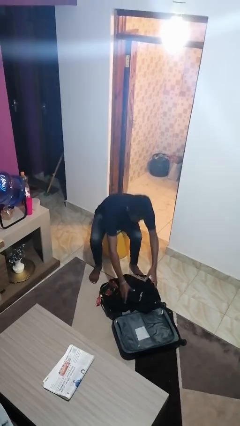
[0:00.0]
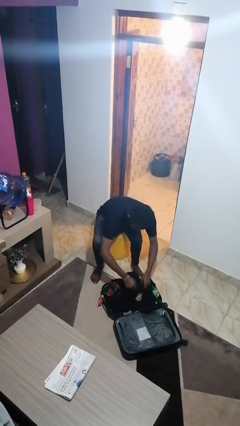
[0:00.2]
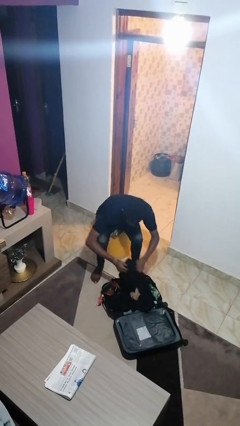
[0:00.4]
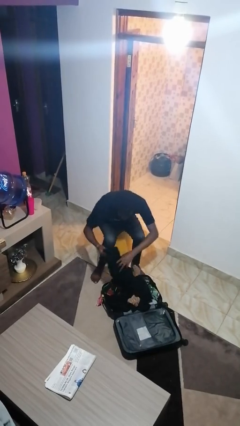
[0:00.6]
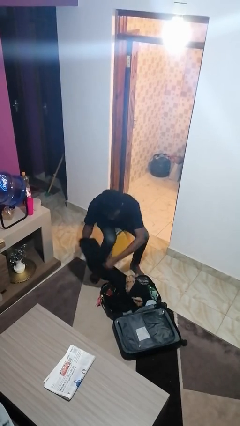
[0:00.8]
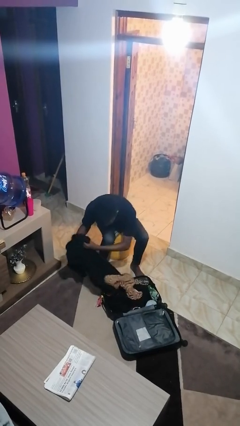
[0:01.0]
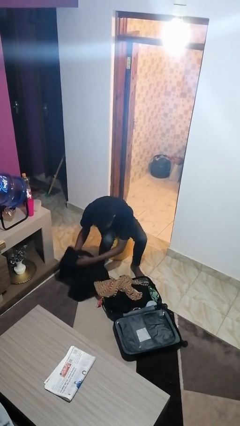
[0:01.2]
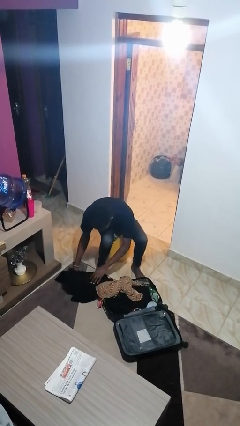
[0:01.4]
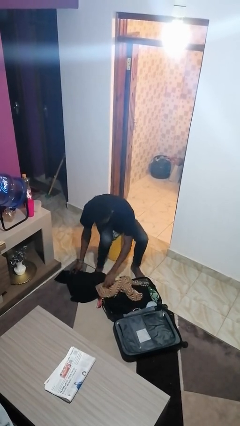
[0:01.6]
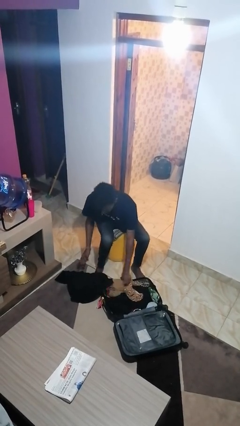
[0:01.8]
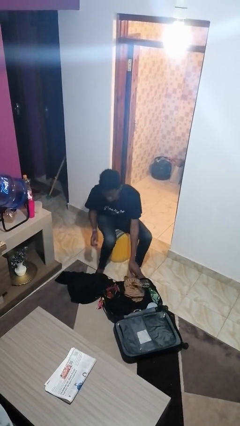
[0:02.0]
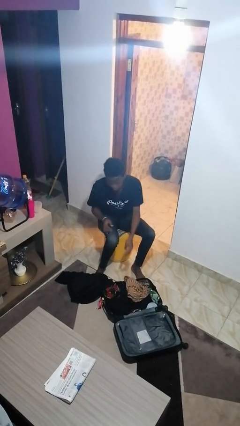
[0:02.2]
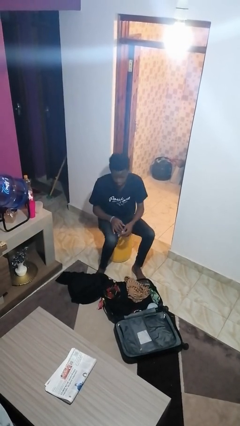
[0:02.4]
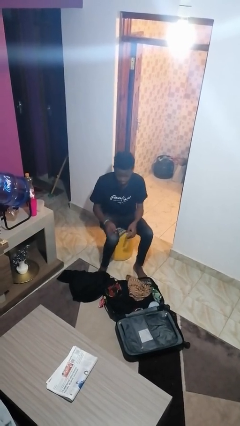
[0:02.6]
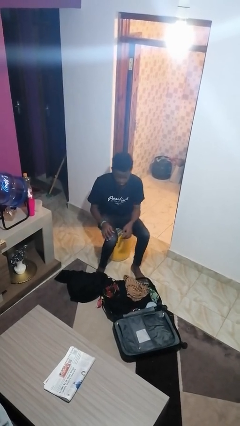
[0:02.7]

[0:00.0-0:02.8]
person unloads clothes from suitcase

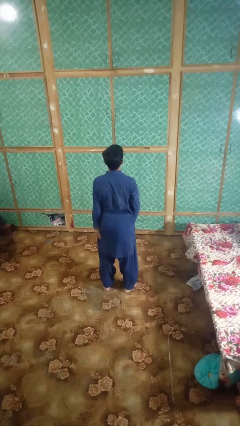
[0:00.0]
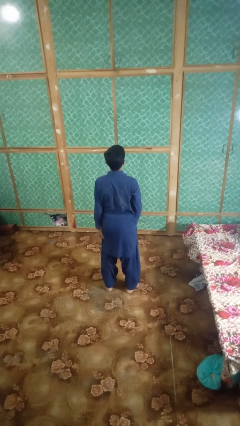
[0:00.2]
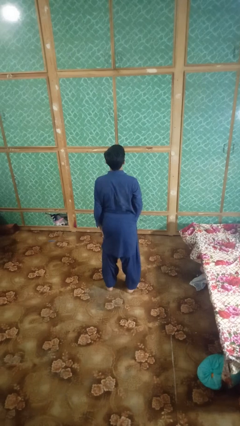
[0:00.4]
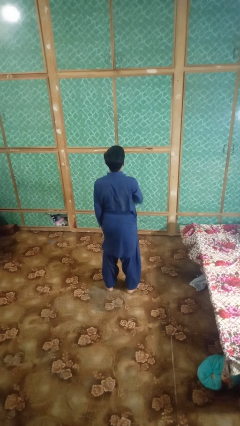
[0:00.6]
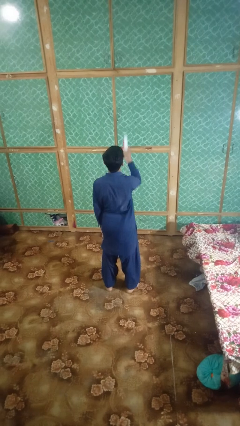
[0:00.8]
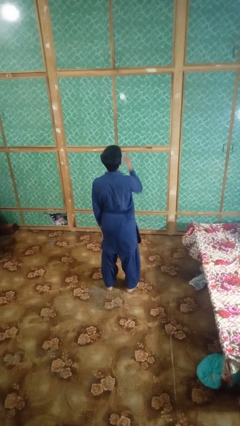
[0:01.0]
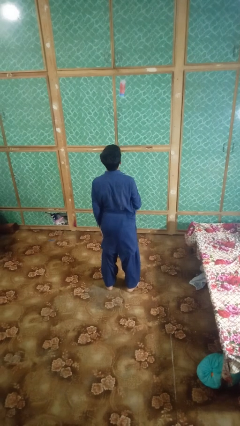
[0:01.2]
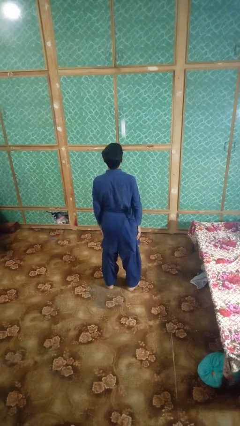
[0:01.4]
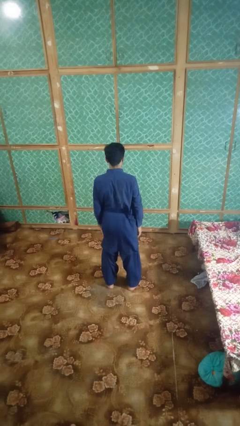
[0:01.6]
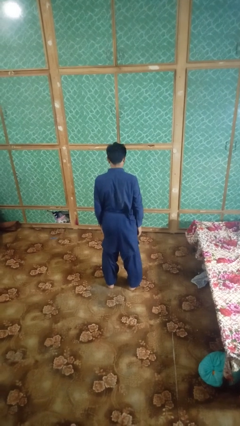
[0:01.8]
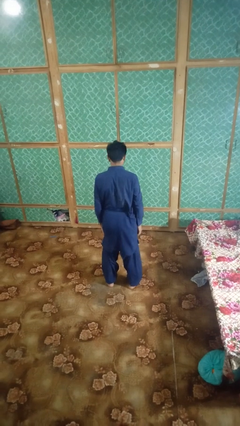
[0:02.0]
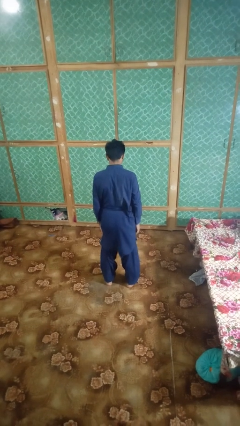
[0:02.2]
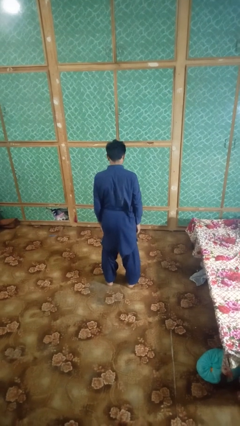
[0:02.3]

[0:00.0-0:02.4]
person throws object into air

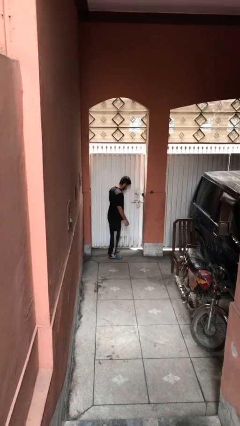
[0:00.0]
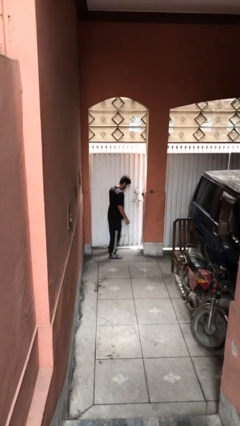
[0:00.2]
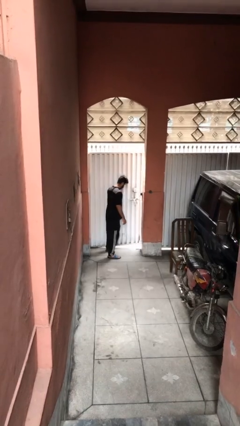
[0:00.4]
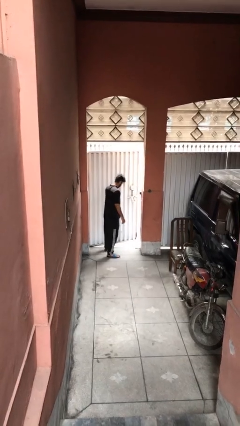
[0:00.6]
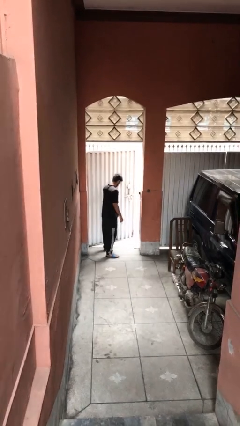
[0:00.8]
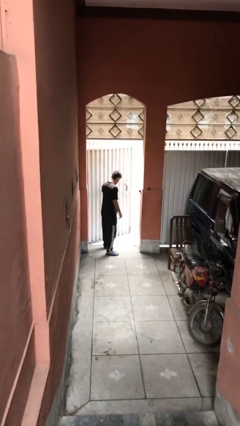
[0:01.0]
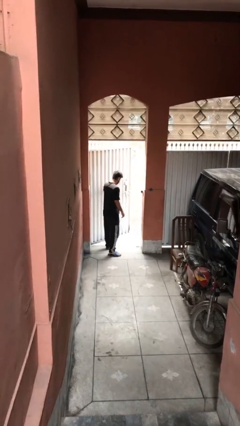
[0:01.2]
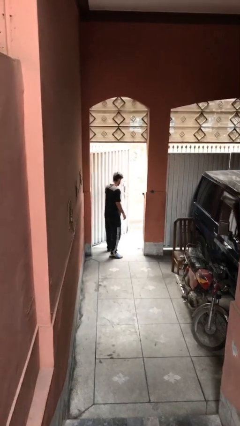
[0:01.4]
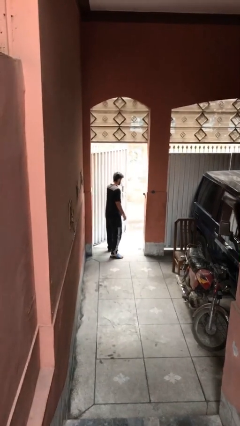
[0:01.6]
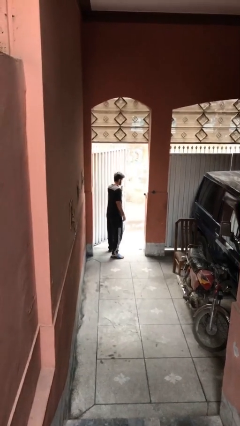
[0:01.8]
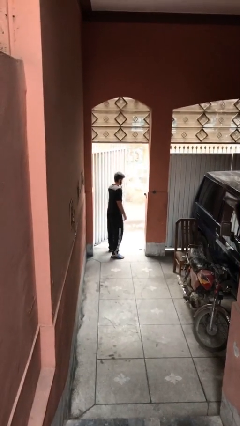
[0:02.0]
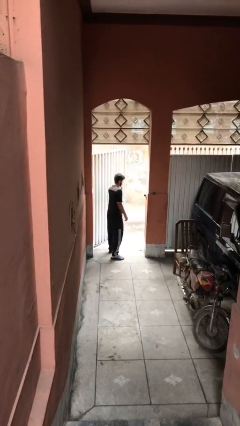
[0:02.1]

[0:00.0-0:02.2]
person opens facility door

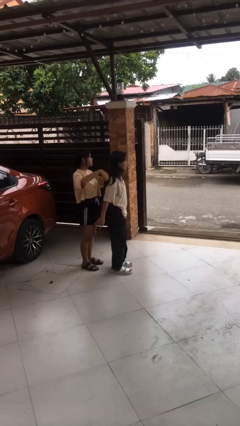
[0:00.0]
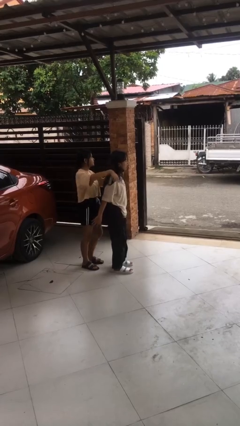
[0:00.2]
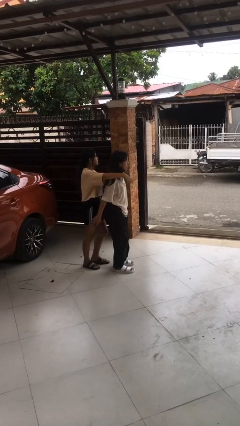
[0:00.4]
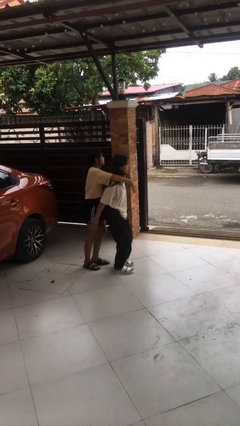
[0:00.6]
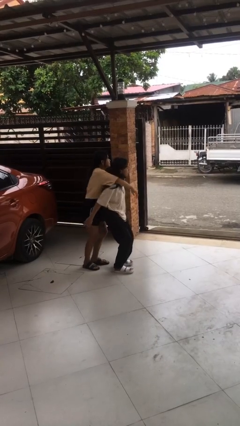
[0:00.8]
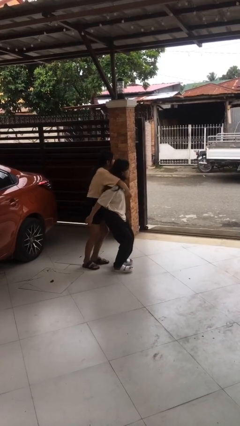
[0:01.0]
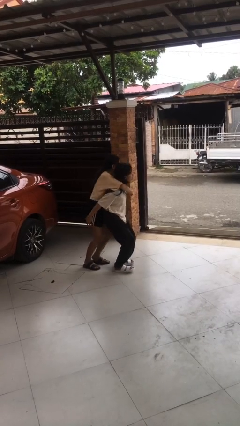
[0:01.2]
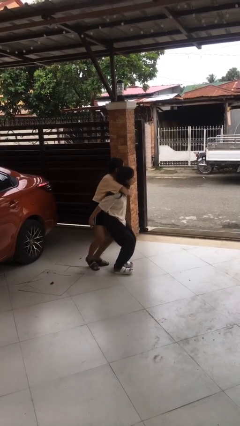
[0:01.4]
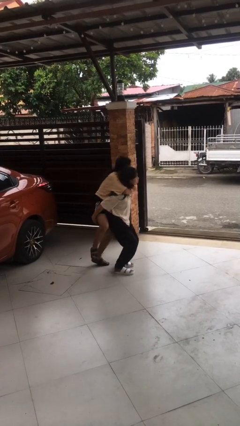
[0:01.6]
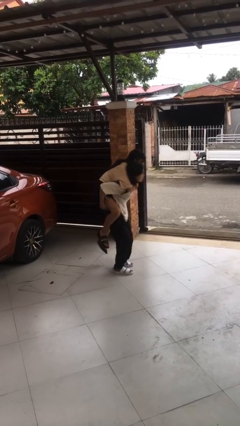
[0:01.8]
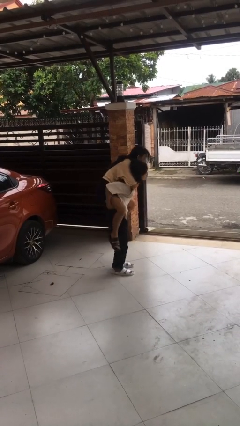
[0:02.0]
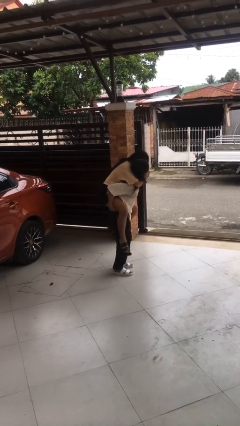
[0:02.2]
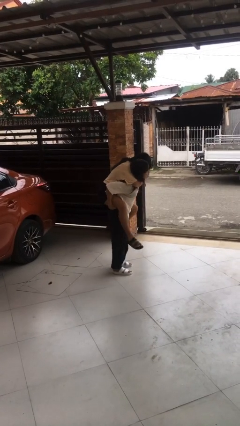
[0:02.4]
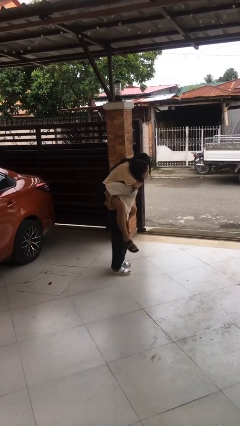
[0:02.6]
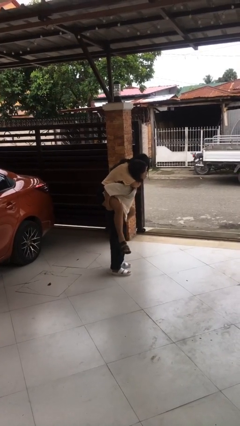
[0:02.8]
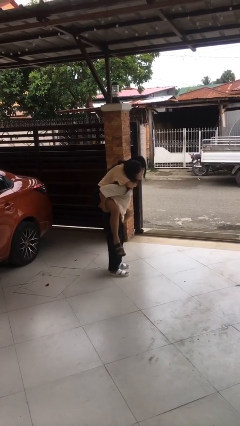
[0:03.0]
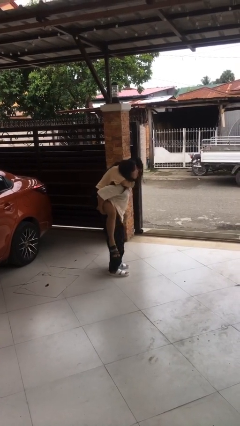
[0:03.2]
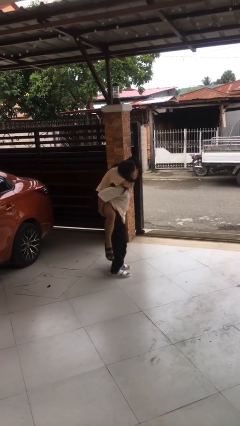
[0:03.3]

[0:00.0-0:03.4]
person carries person over shoulder

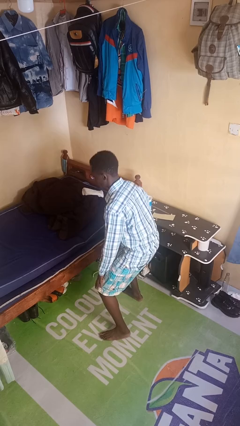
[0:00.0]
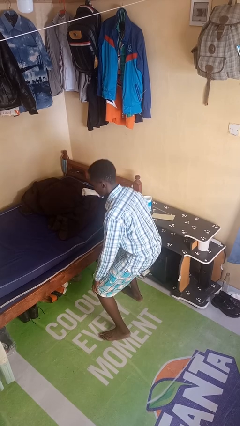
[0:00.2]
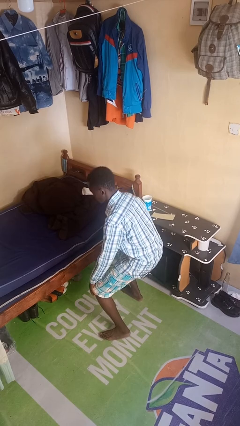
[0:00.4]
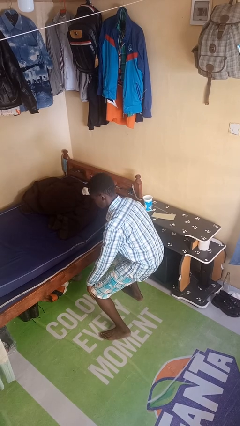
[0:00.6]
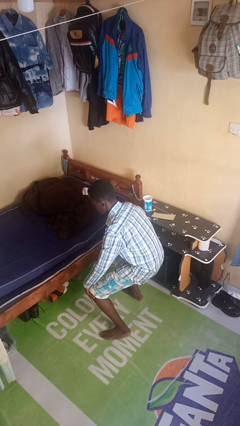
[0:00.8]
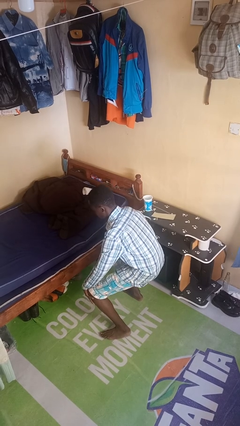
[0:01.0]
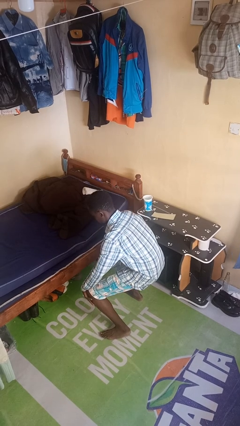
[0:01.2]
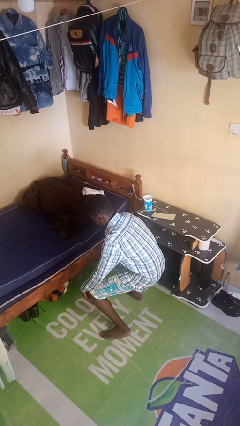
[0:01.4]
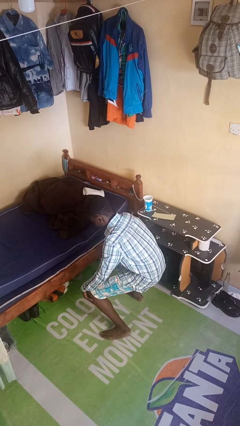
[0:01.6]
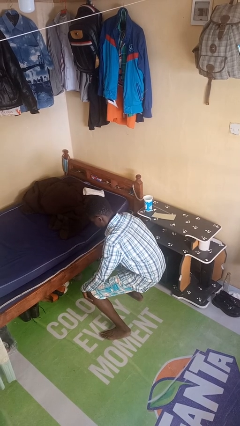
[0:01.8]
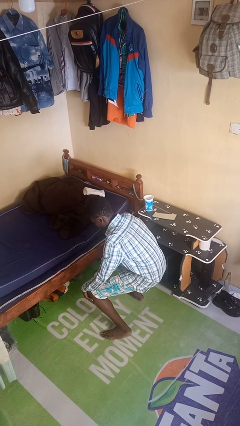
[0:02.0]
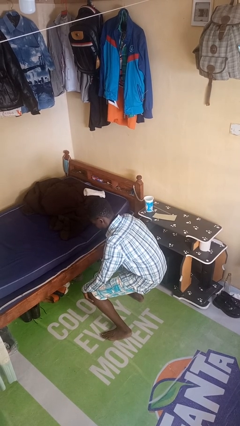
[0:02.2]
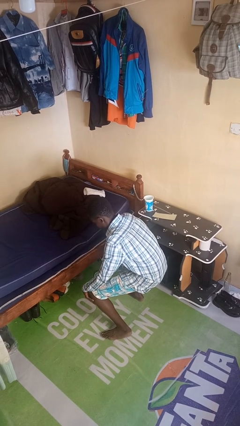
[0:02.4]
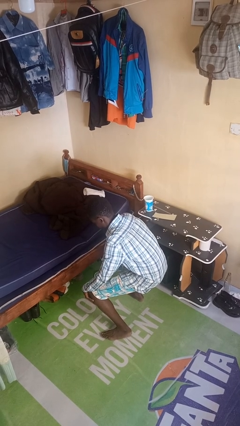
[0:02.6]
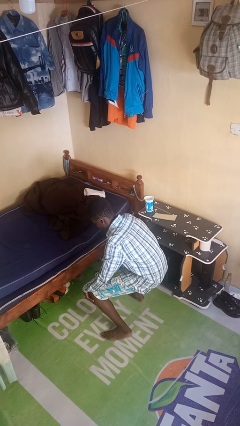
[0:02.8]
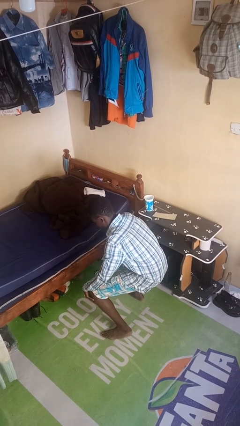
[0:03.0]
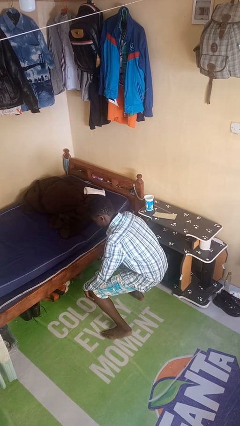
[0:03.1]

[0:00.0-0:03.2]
person squats

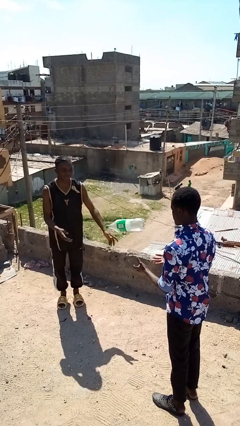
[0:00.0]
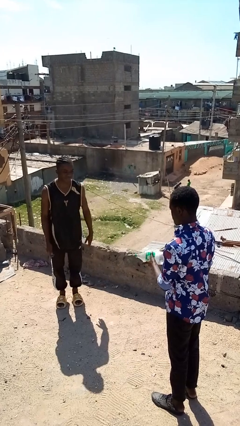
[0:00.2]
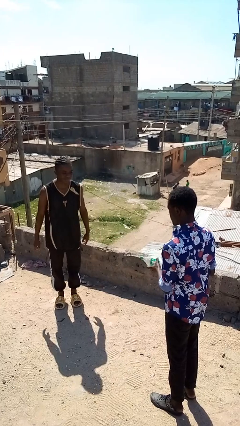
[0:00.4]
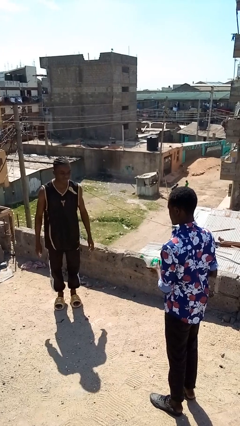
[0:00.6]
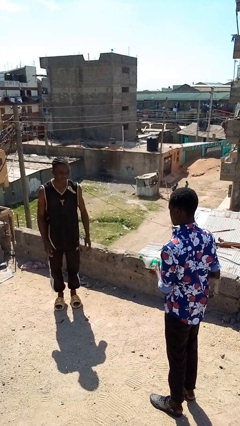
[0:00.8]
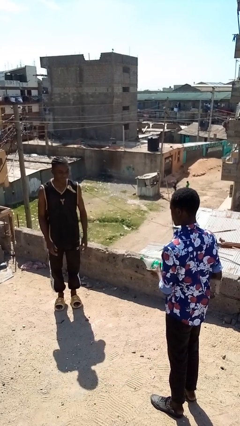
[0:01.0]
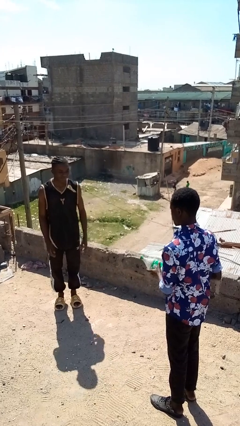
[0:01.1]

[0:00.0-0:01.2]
person catches object from person

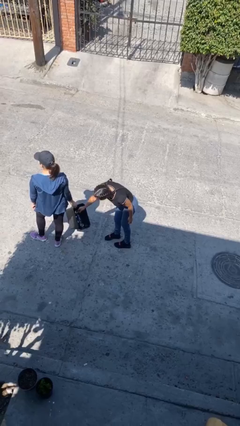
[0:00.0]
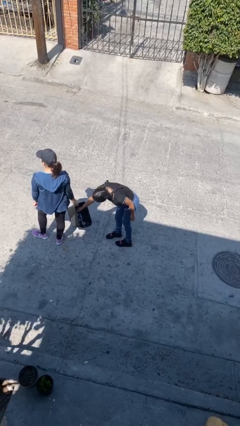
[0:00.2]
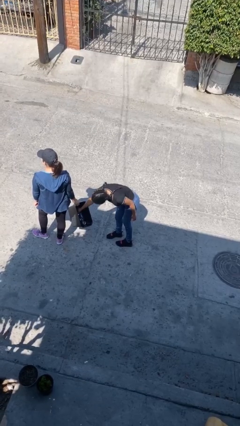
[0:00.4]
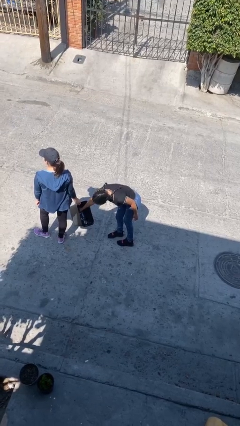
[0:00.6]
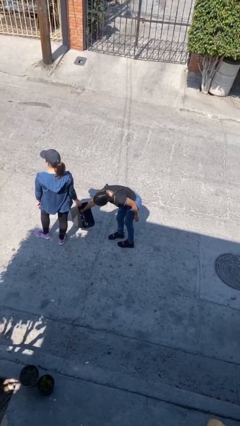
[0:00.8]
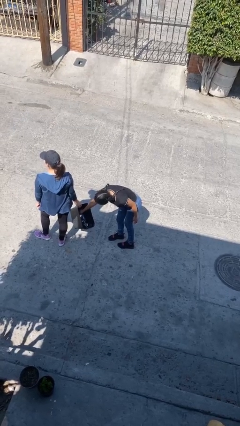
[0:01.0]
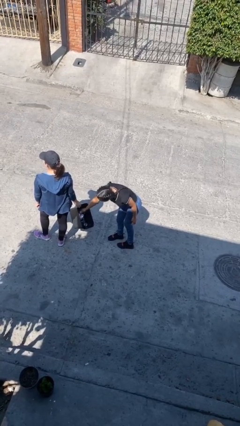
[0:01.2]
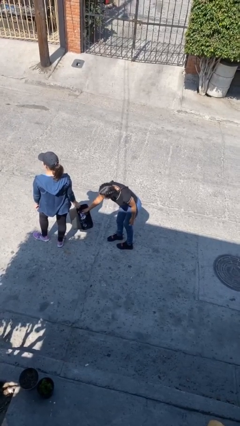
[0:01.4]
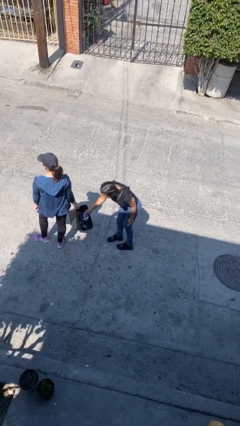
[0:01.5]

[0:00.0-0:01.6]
person steals object from person

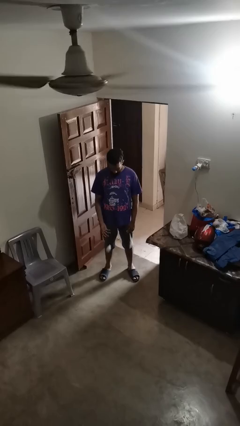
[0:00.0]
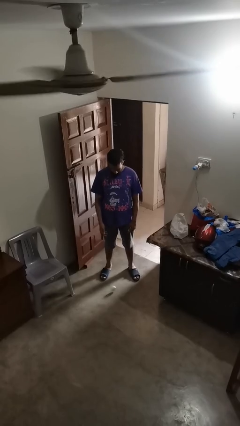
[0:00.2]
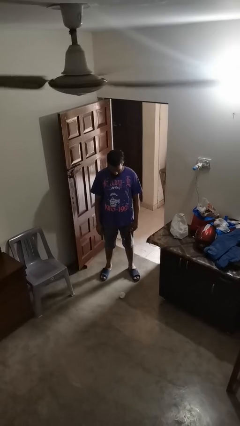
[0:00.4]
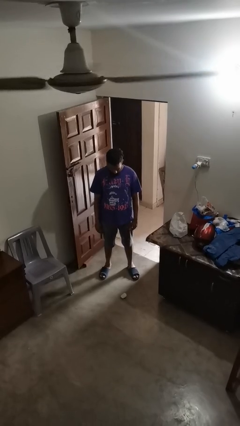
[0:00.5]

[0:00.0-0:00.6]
person catches dropped object
